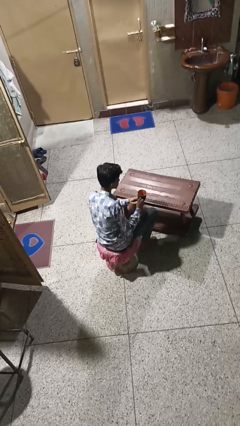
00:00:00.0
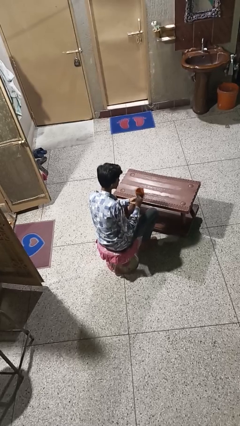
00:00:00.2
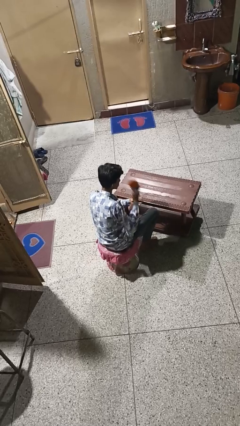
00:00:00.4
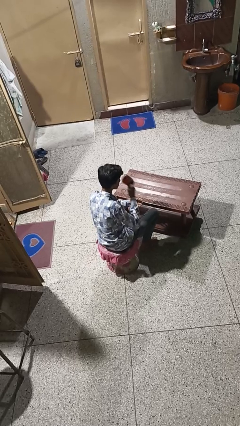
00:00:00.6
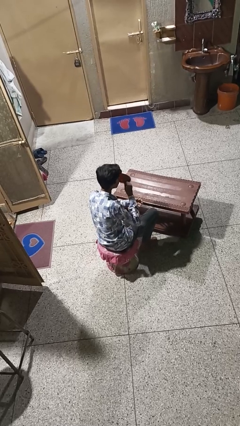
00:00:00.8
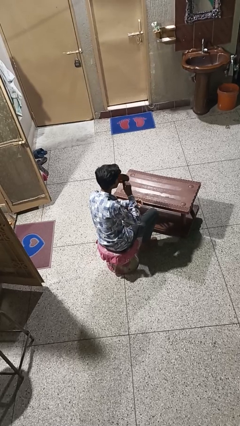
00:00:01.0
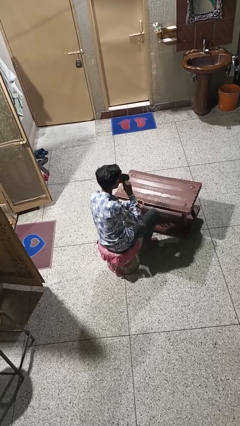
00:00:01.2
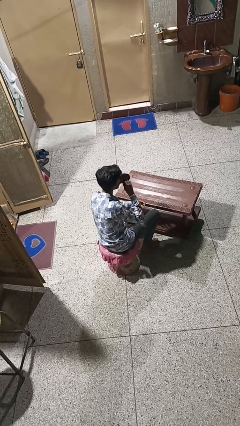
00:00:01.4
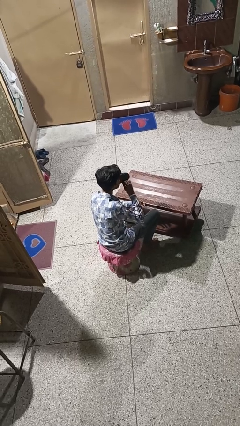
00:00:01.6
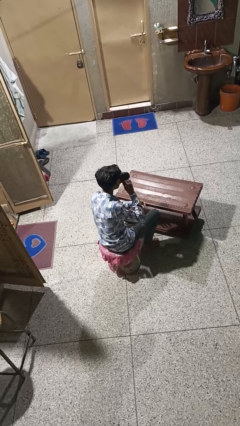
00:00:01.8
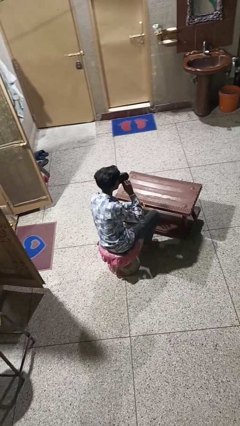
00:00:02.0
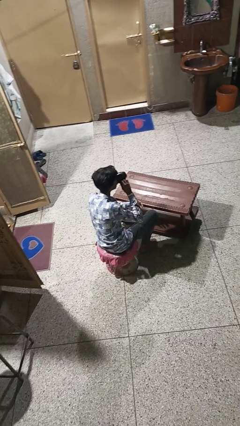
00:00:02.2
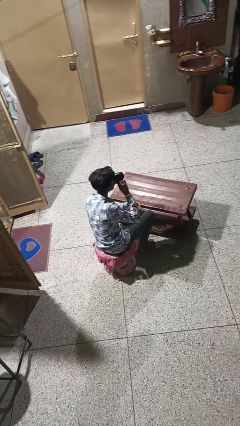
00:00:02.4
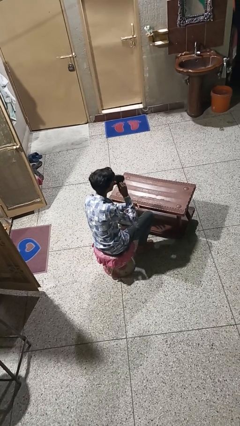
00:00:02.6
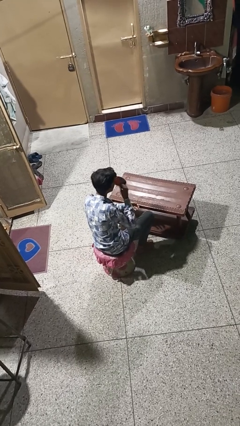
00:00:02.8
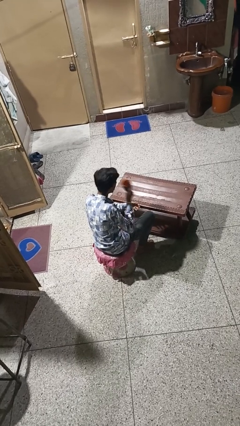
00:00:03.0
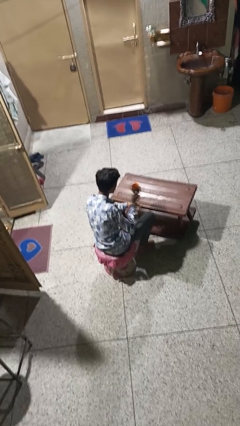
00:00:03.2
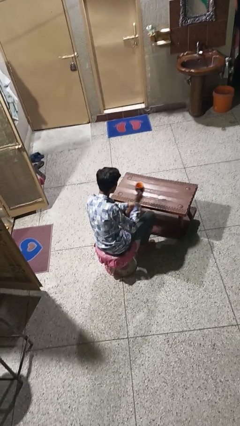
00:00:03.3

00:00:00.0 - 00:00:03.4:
person drinks from mug

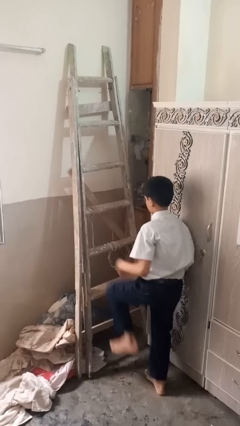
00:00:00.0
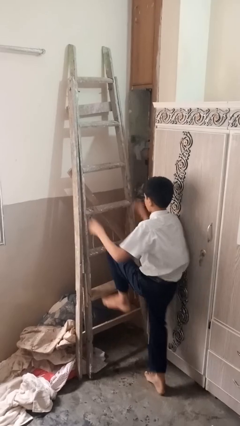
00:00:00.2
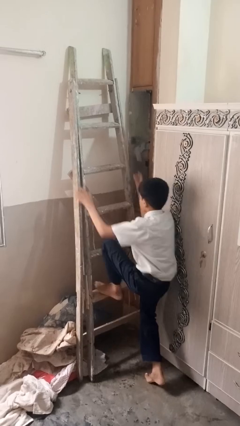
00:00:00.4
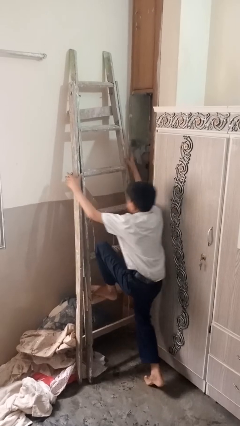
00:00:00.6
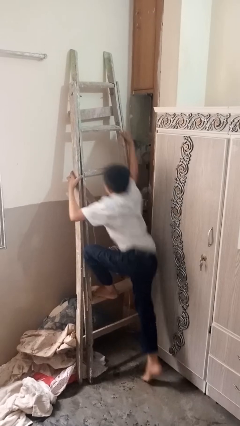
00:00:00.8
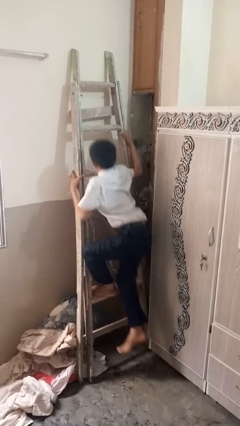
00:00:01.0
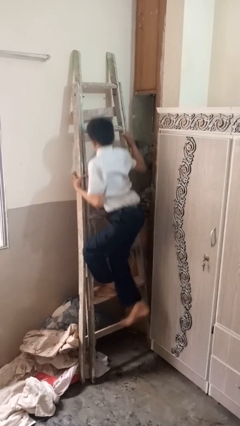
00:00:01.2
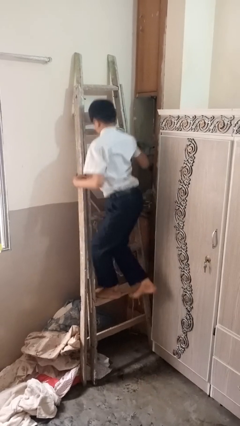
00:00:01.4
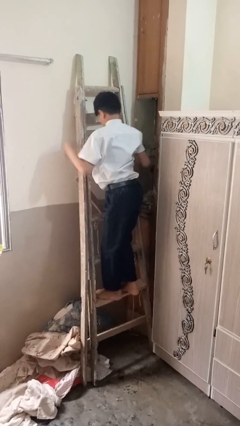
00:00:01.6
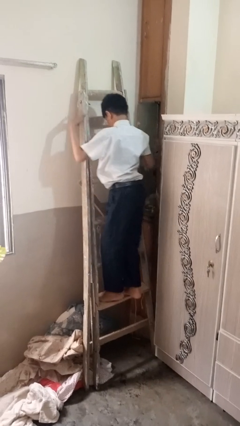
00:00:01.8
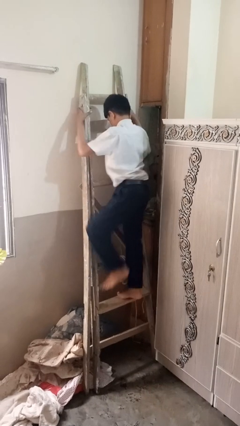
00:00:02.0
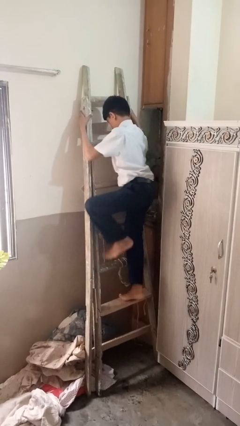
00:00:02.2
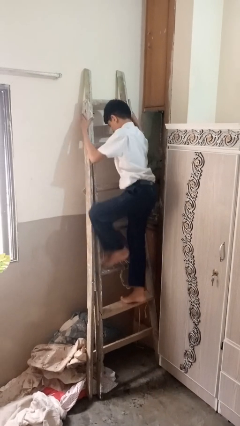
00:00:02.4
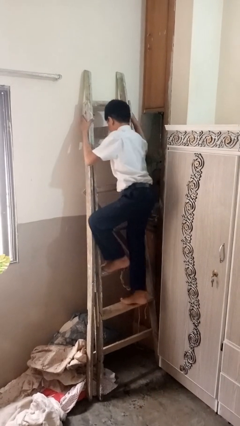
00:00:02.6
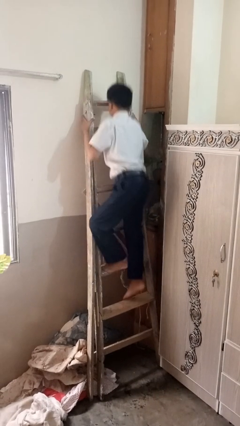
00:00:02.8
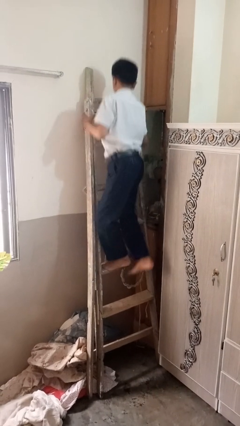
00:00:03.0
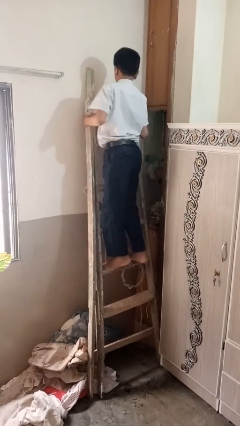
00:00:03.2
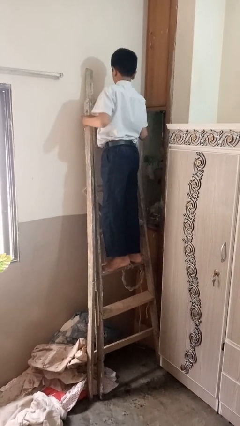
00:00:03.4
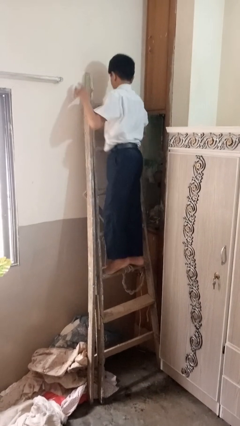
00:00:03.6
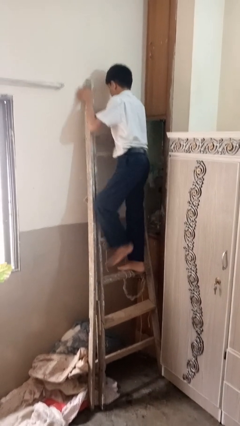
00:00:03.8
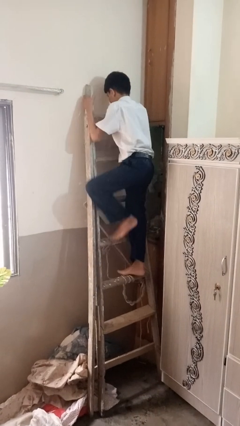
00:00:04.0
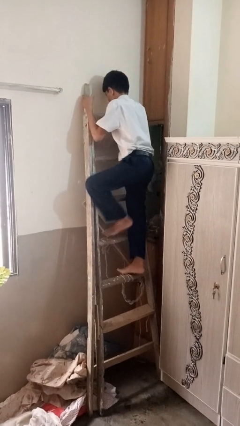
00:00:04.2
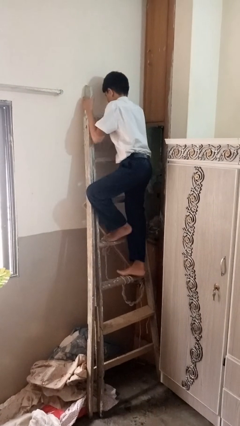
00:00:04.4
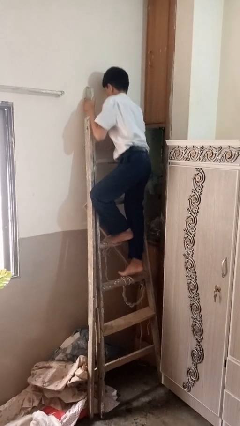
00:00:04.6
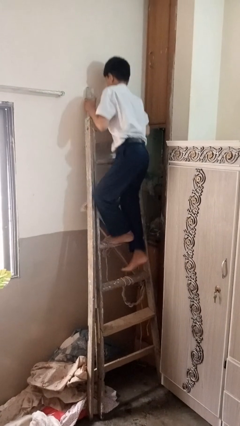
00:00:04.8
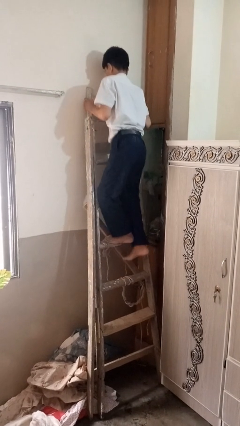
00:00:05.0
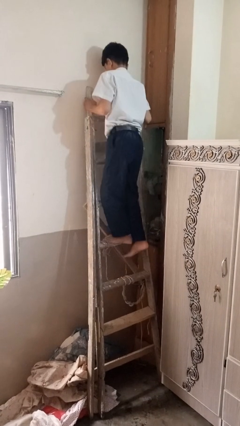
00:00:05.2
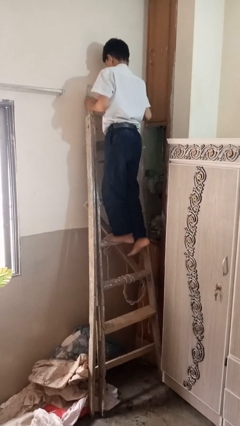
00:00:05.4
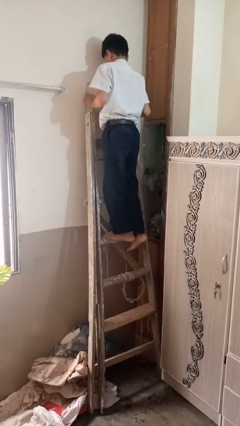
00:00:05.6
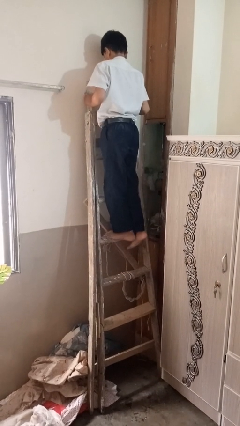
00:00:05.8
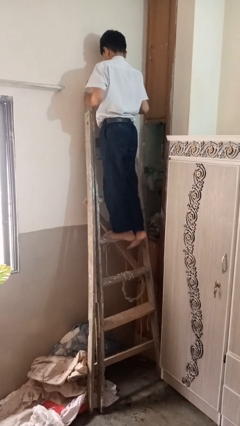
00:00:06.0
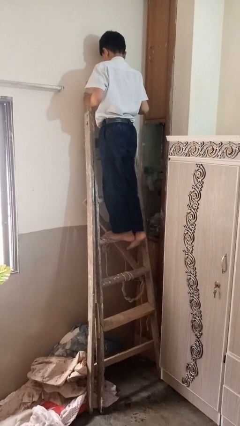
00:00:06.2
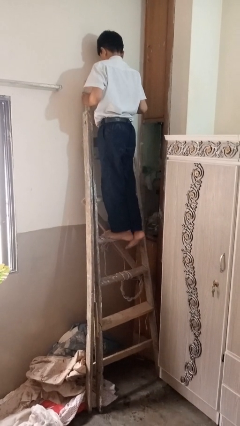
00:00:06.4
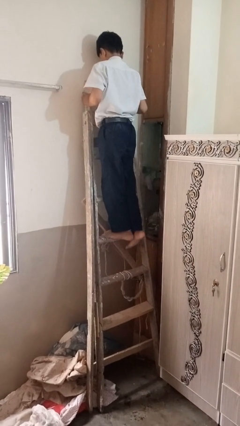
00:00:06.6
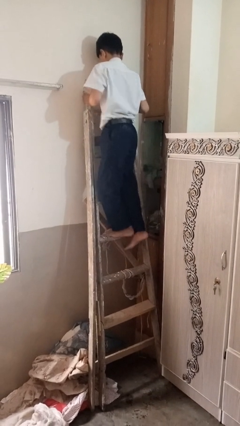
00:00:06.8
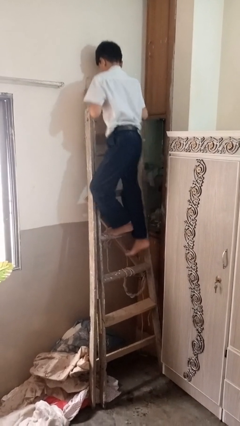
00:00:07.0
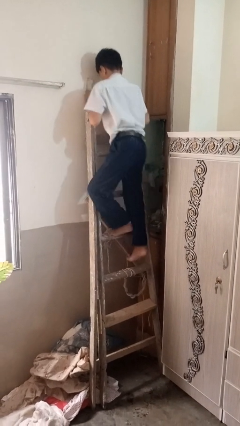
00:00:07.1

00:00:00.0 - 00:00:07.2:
person climbs up ladder

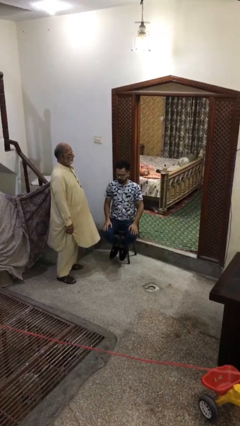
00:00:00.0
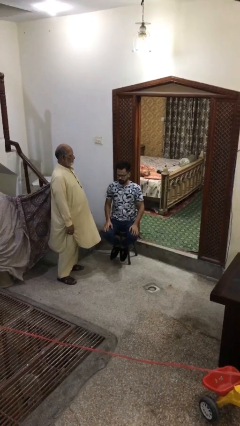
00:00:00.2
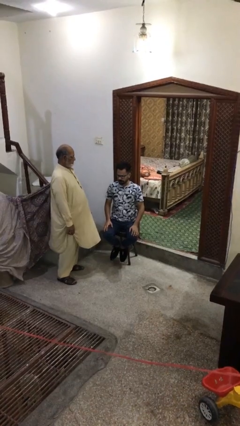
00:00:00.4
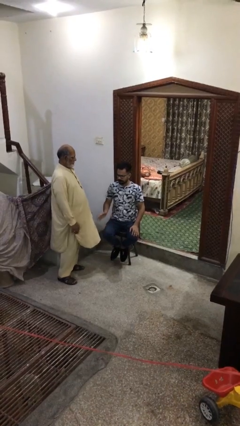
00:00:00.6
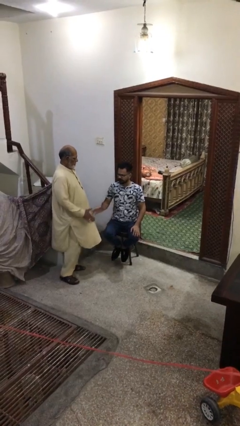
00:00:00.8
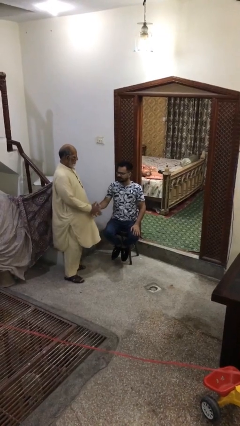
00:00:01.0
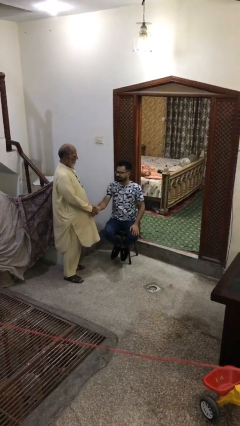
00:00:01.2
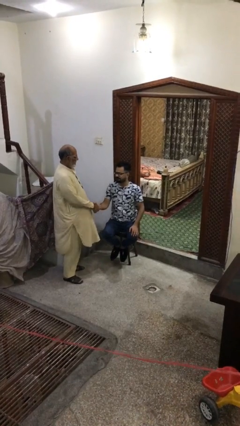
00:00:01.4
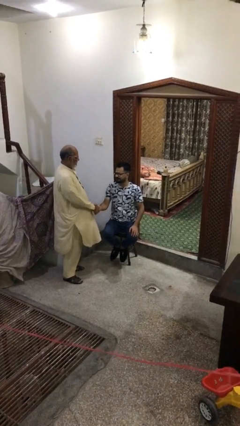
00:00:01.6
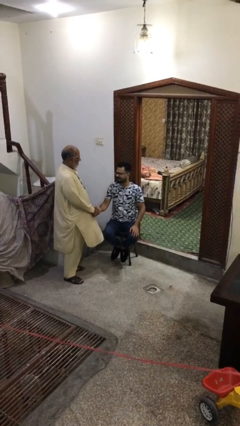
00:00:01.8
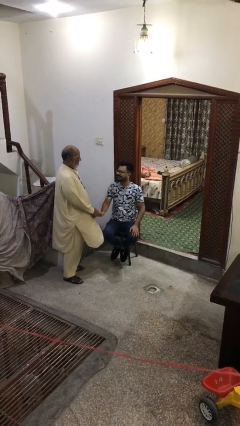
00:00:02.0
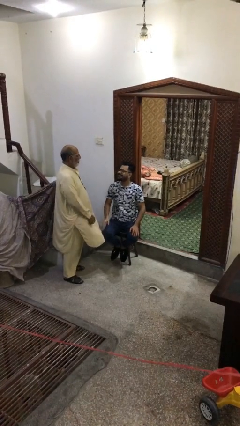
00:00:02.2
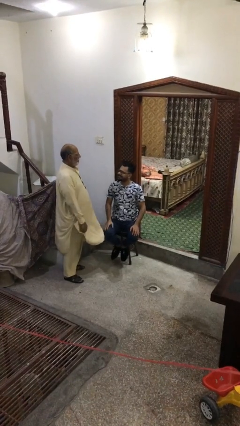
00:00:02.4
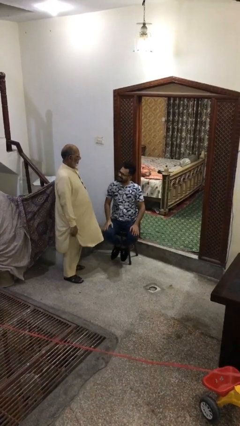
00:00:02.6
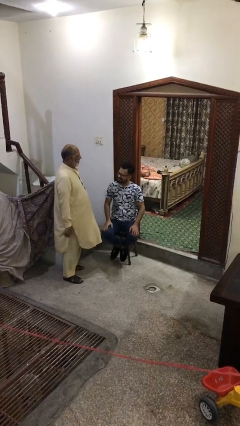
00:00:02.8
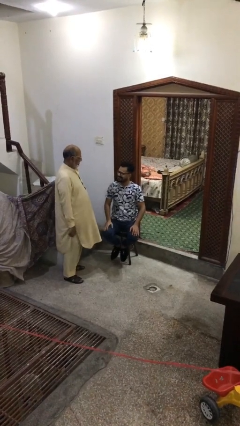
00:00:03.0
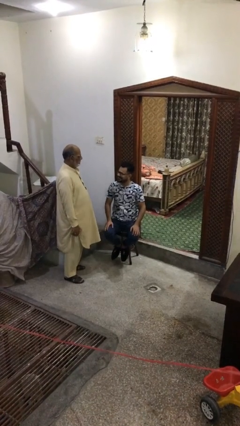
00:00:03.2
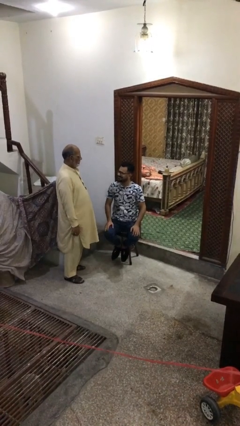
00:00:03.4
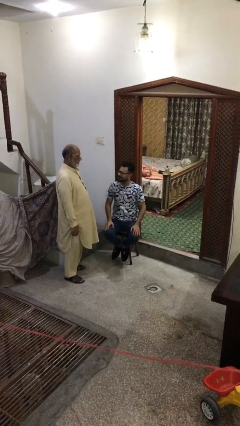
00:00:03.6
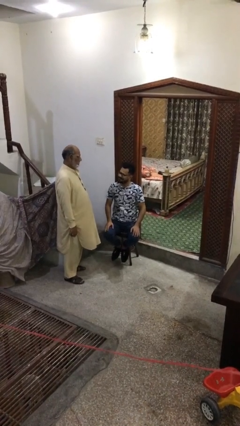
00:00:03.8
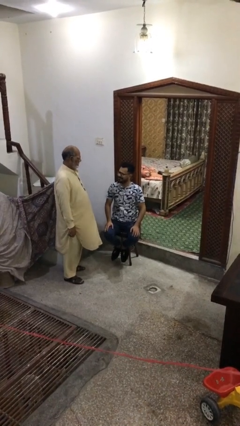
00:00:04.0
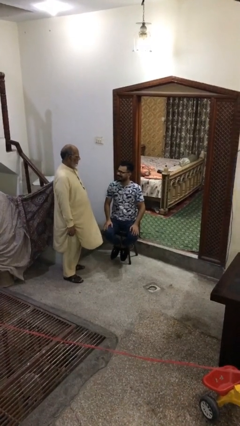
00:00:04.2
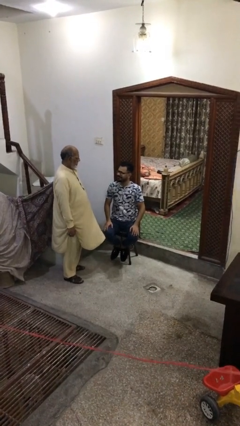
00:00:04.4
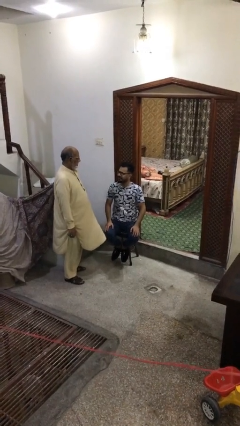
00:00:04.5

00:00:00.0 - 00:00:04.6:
person shakes hand

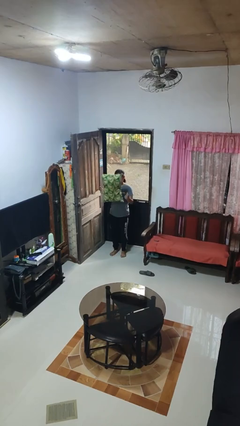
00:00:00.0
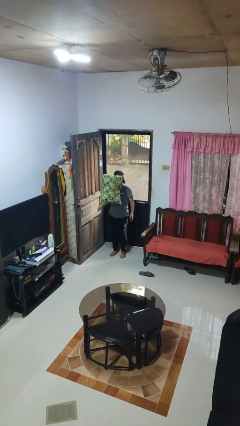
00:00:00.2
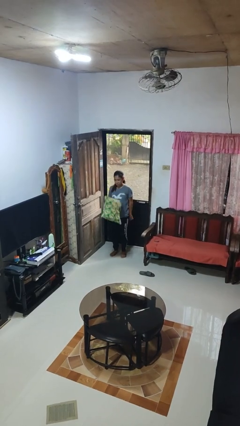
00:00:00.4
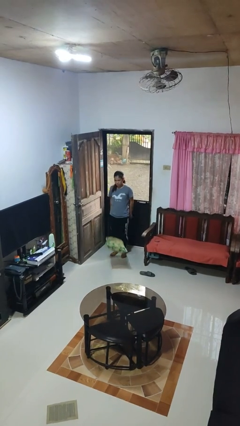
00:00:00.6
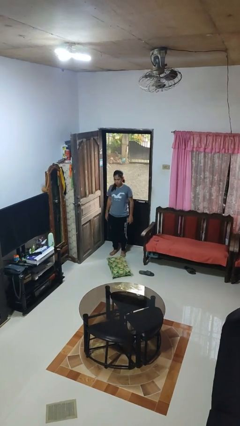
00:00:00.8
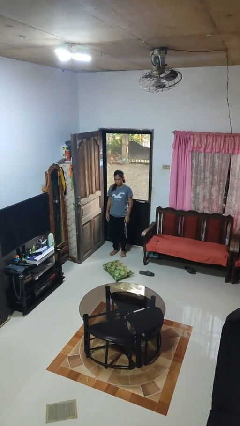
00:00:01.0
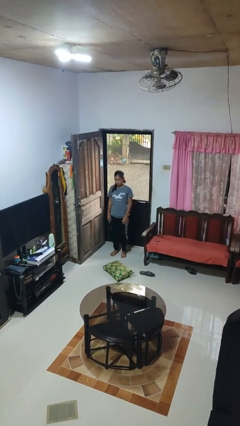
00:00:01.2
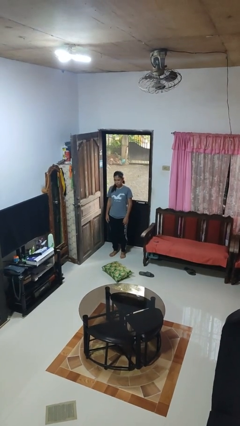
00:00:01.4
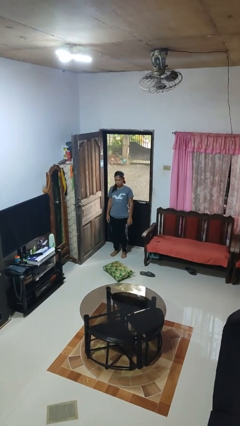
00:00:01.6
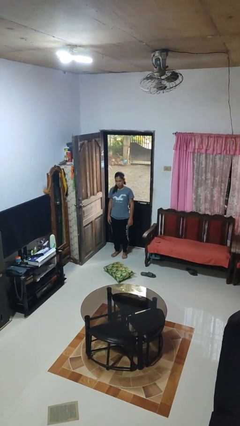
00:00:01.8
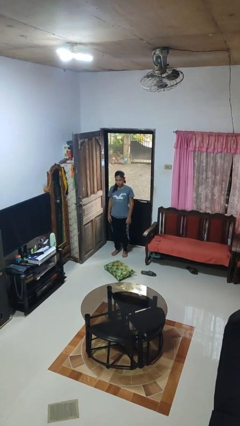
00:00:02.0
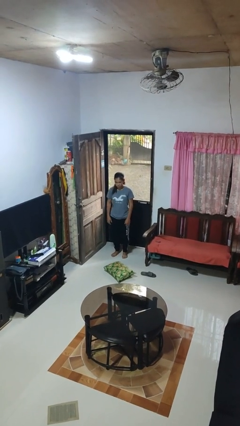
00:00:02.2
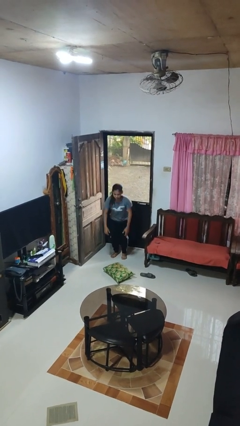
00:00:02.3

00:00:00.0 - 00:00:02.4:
person throws object into air

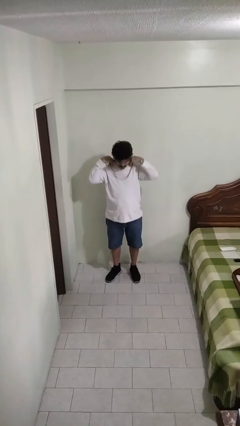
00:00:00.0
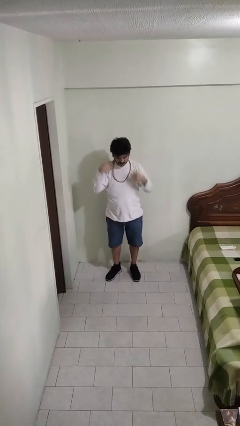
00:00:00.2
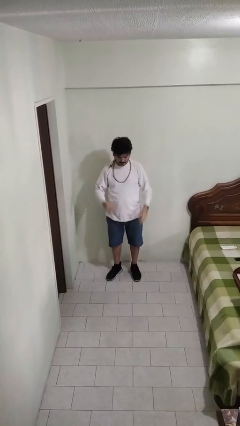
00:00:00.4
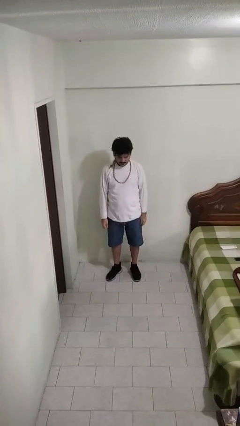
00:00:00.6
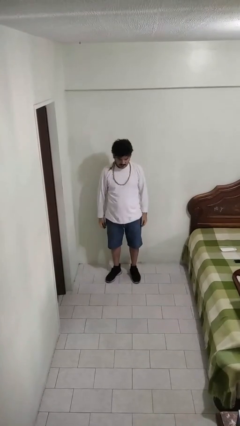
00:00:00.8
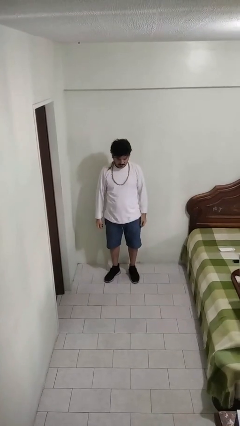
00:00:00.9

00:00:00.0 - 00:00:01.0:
person puts on necklace
